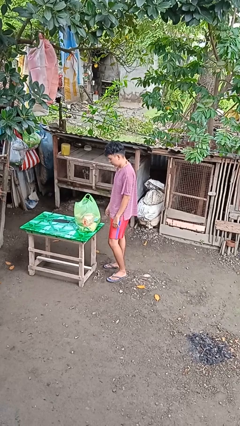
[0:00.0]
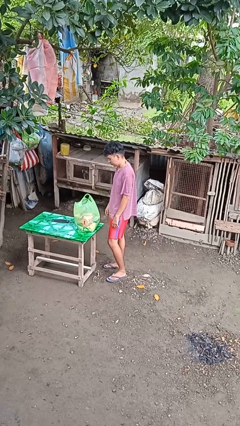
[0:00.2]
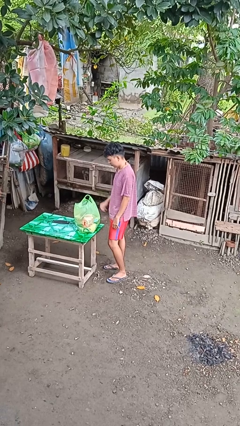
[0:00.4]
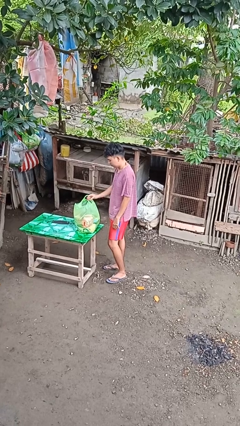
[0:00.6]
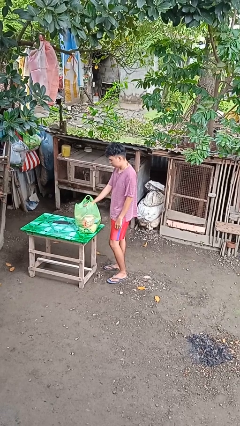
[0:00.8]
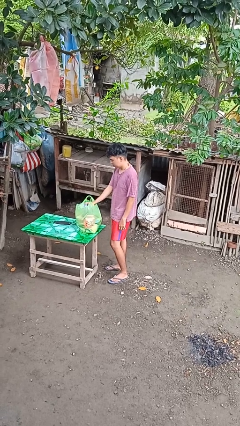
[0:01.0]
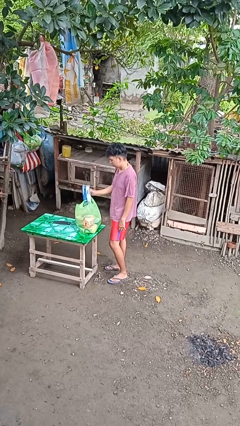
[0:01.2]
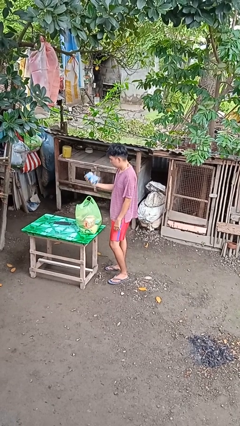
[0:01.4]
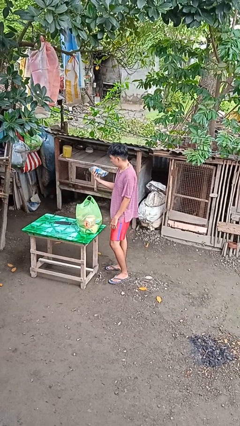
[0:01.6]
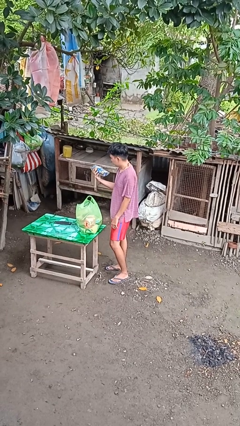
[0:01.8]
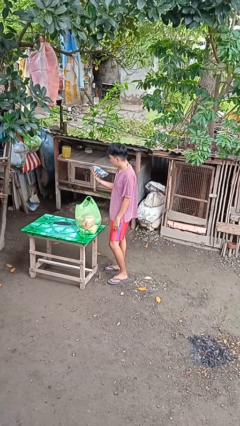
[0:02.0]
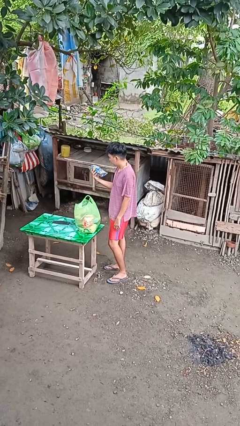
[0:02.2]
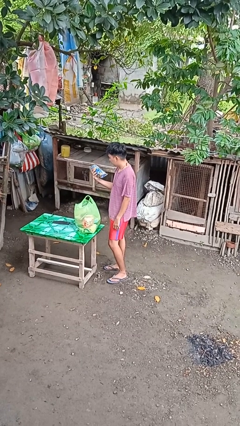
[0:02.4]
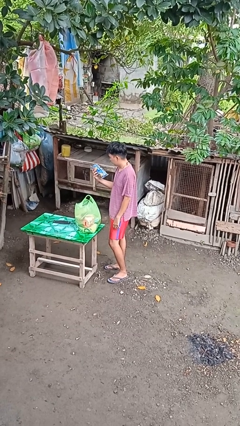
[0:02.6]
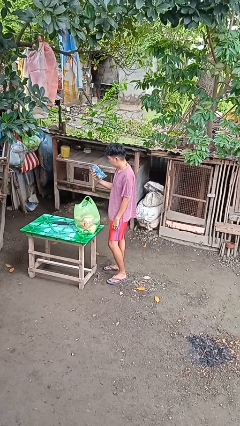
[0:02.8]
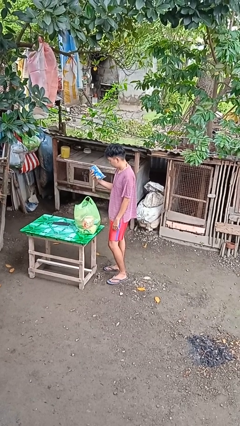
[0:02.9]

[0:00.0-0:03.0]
person takes object from bag

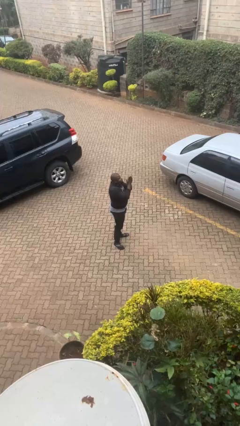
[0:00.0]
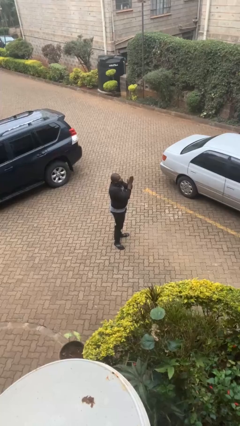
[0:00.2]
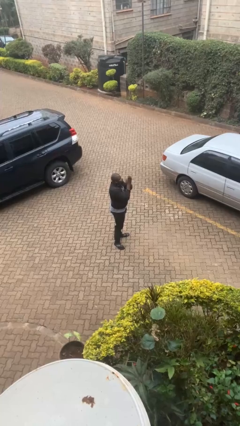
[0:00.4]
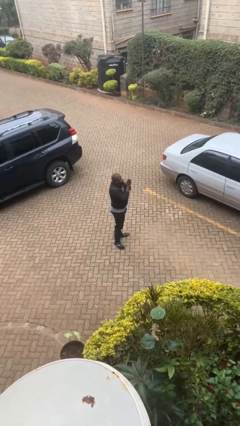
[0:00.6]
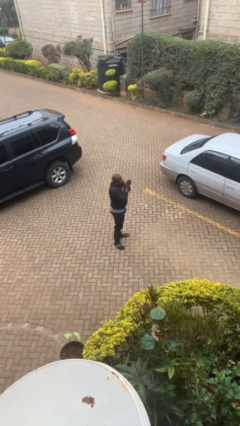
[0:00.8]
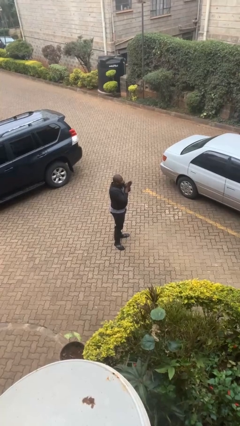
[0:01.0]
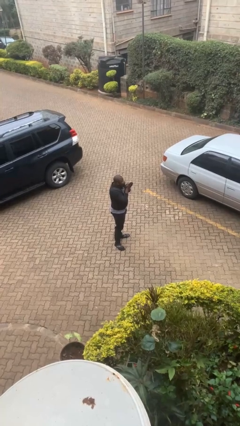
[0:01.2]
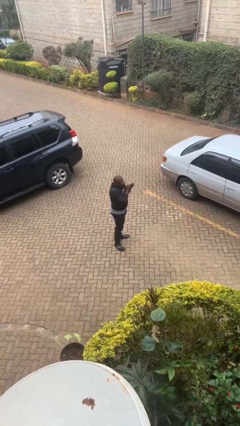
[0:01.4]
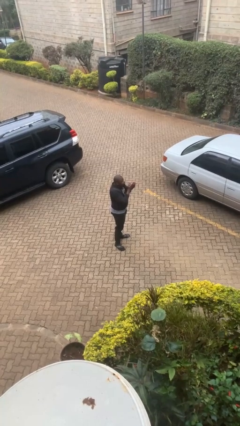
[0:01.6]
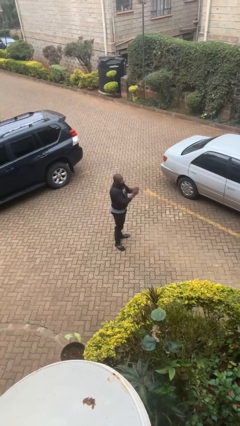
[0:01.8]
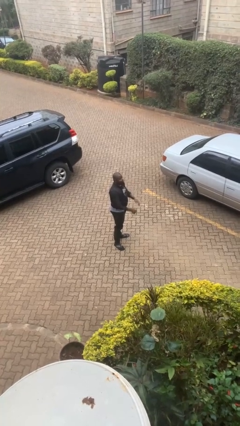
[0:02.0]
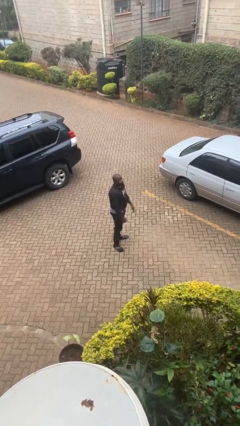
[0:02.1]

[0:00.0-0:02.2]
person blows into hands

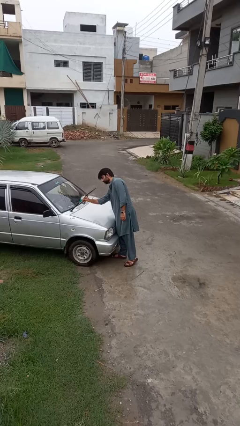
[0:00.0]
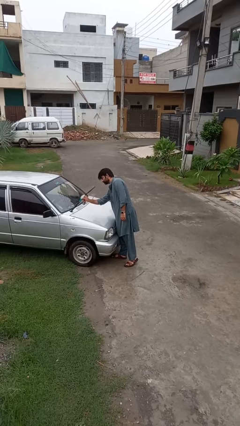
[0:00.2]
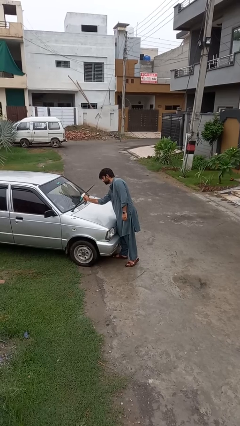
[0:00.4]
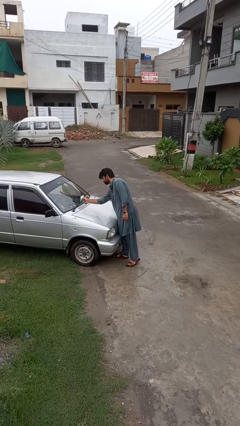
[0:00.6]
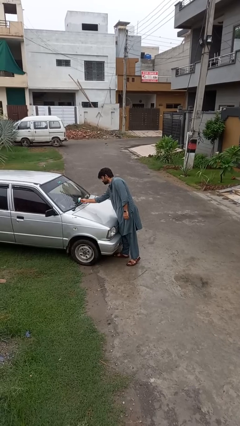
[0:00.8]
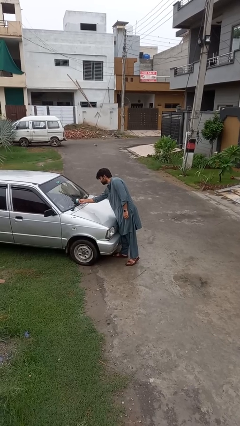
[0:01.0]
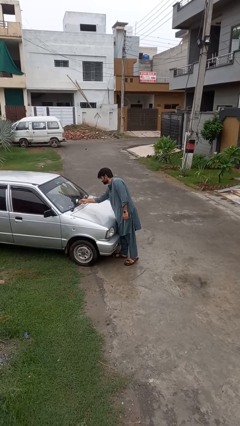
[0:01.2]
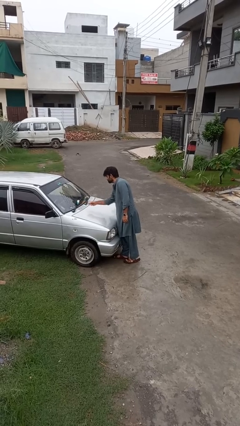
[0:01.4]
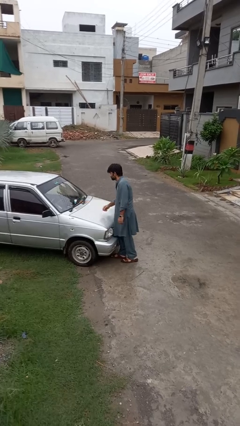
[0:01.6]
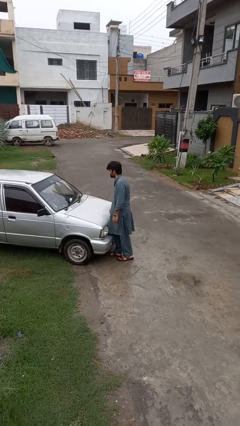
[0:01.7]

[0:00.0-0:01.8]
person flips down car wipers

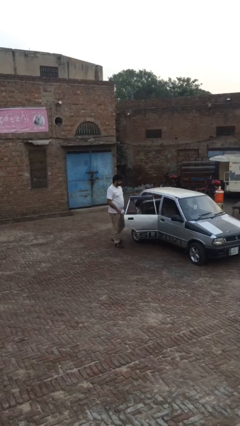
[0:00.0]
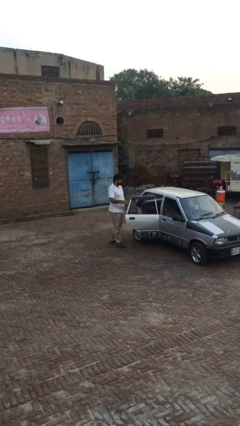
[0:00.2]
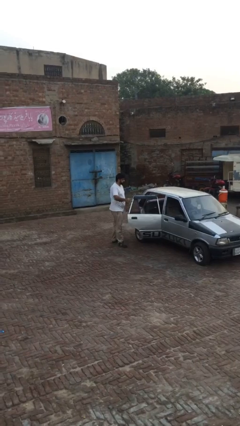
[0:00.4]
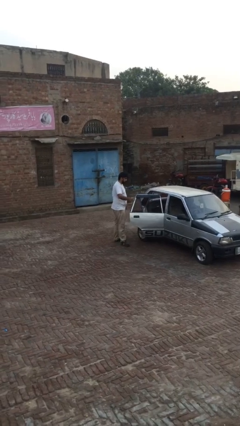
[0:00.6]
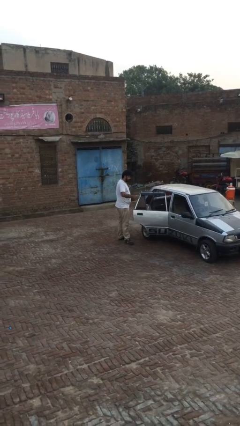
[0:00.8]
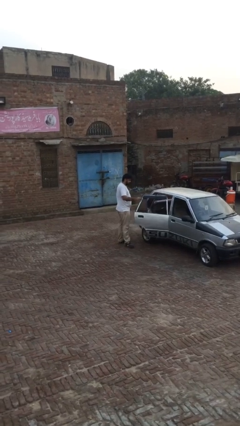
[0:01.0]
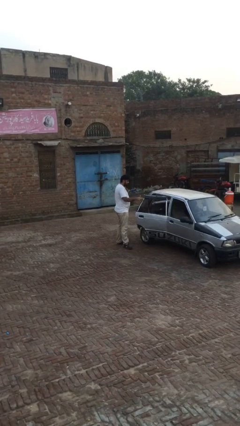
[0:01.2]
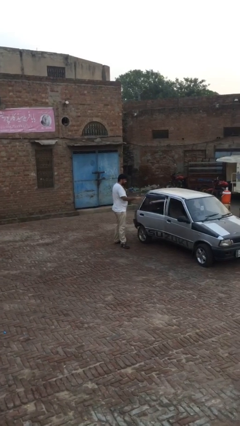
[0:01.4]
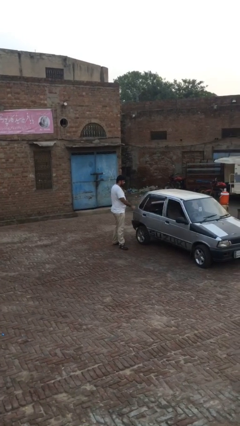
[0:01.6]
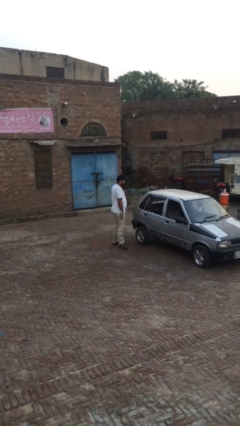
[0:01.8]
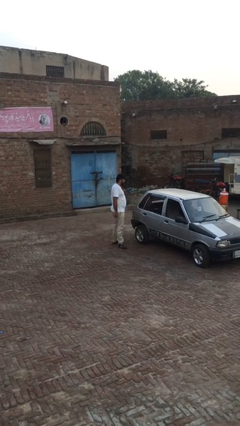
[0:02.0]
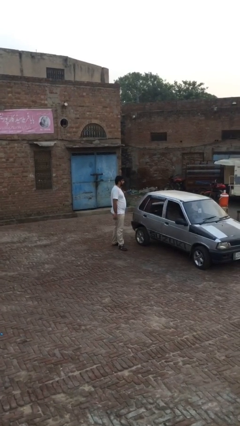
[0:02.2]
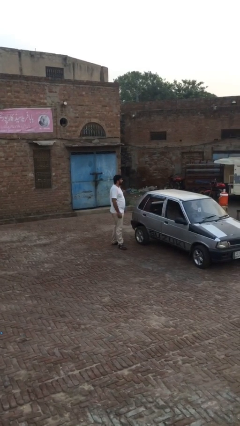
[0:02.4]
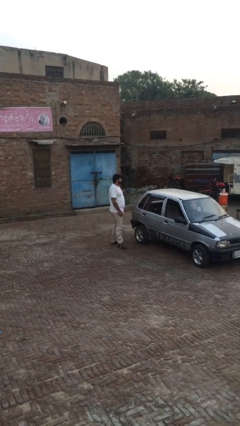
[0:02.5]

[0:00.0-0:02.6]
person closes car door

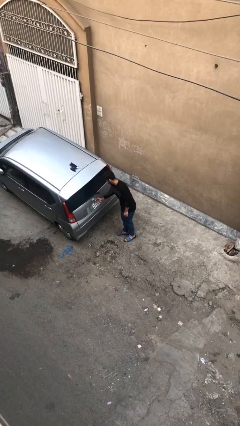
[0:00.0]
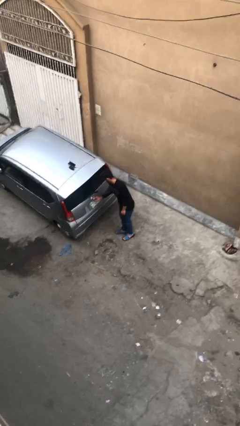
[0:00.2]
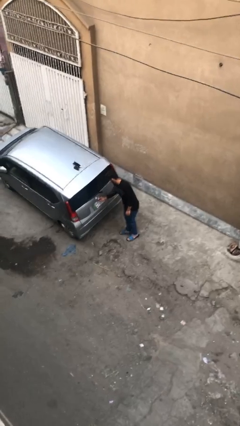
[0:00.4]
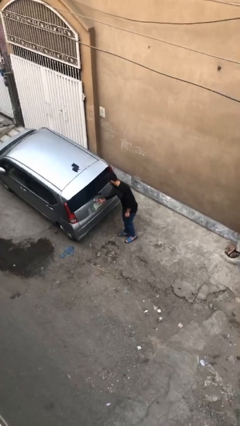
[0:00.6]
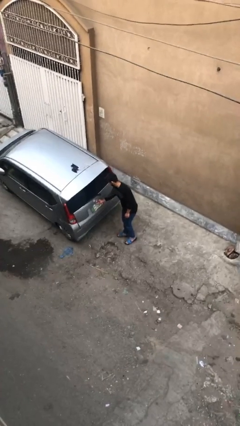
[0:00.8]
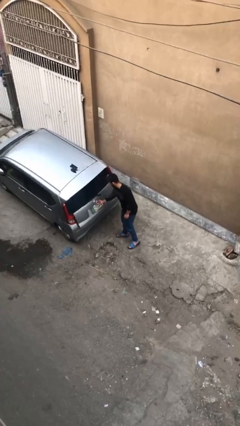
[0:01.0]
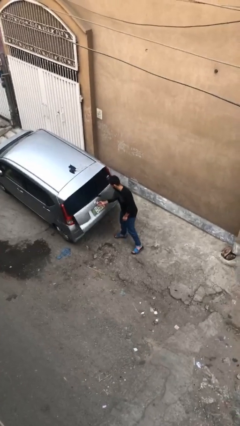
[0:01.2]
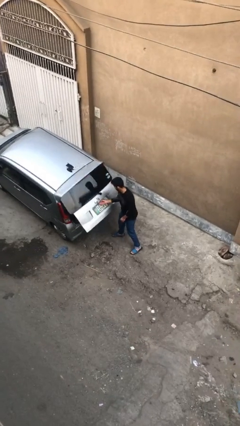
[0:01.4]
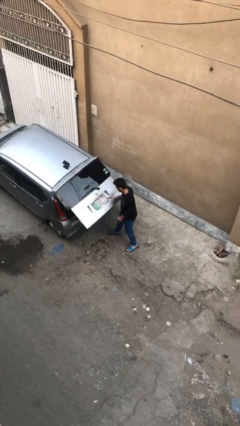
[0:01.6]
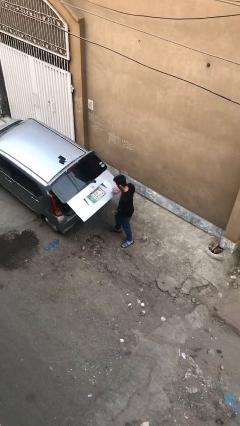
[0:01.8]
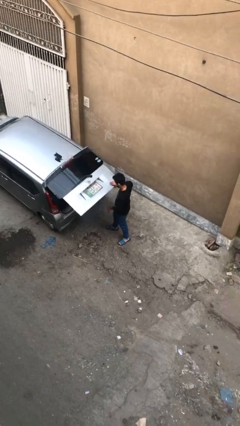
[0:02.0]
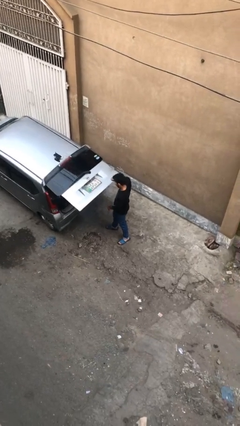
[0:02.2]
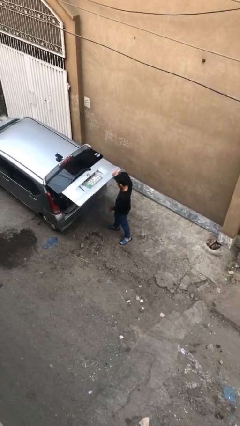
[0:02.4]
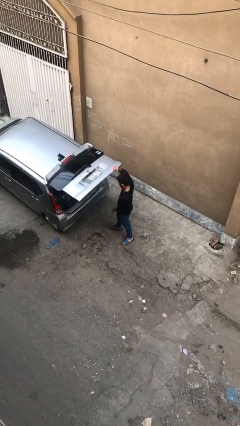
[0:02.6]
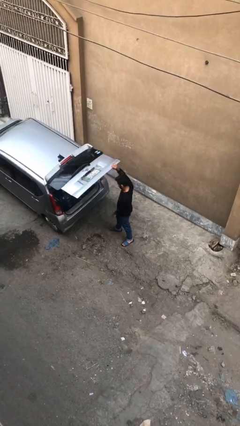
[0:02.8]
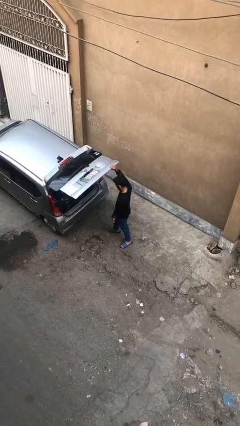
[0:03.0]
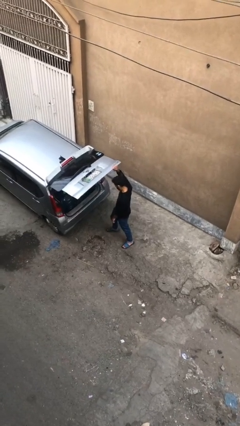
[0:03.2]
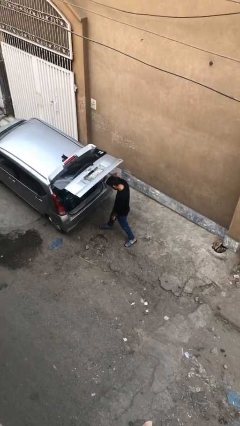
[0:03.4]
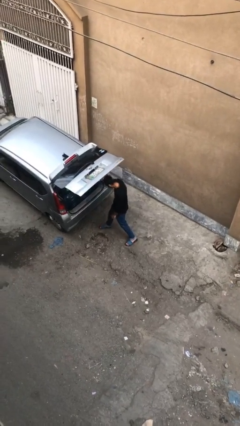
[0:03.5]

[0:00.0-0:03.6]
person opens car trunk

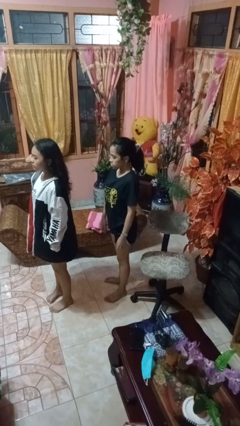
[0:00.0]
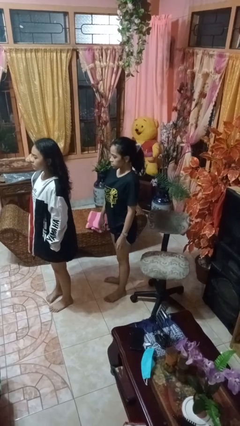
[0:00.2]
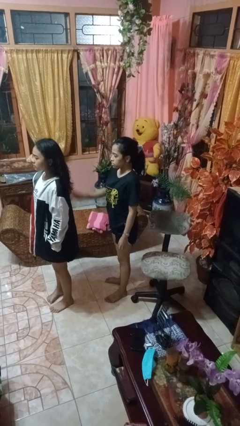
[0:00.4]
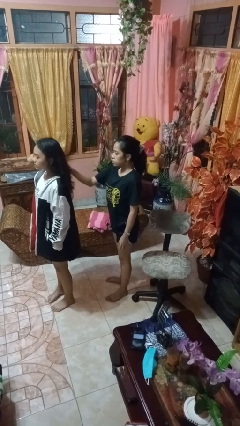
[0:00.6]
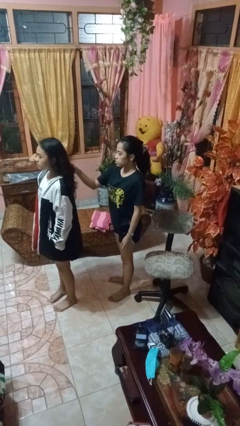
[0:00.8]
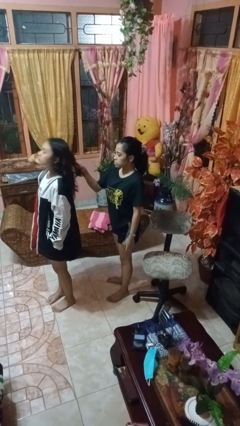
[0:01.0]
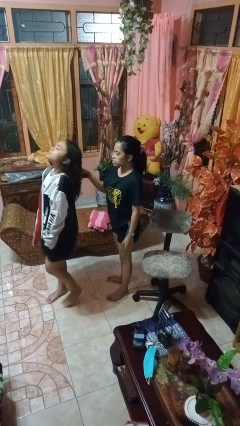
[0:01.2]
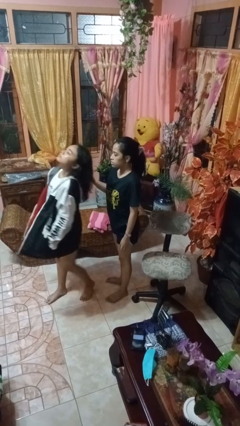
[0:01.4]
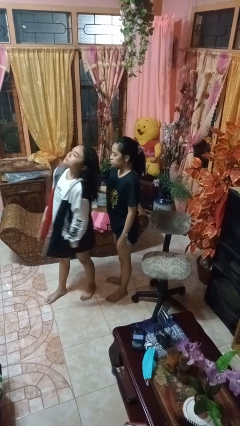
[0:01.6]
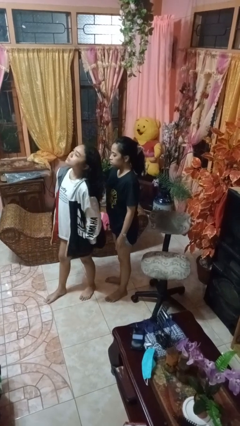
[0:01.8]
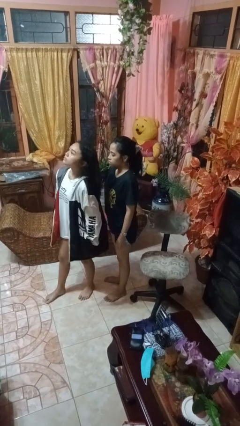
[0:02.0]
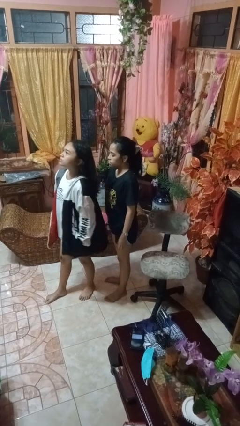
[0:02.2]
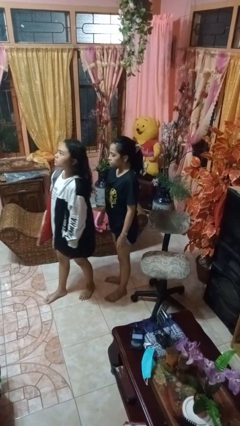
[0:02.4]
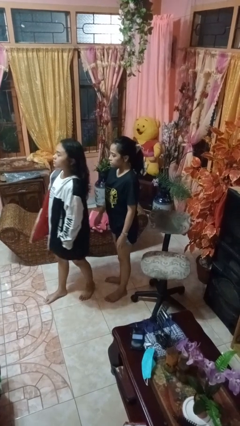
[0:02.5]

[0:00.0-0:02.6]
person grabs person by hair

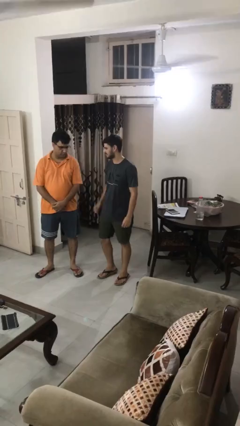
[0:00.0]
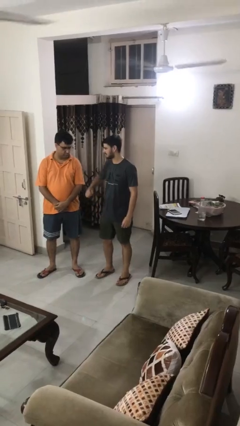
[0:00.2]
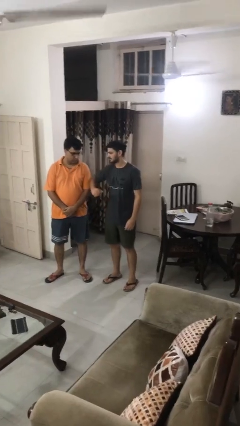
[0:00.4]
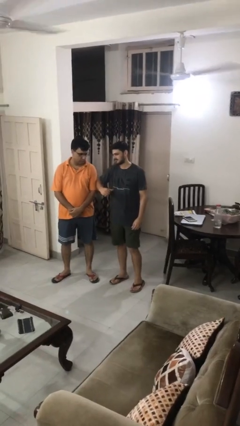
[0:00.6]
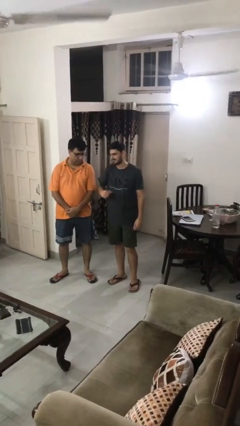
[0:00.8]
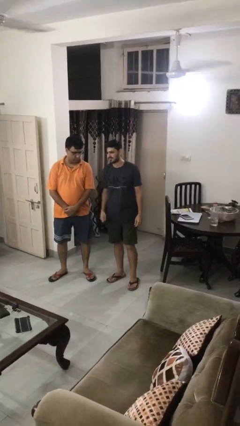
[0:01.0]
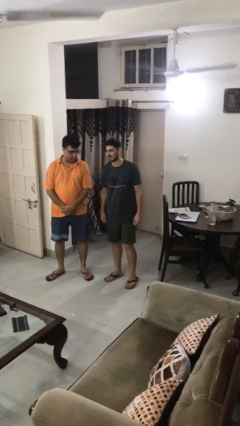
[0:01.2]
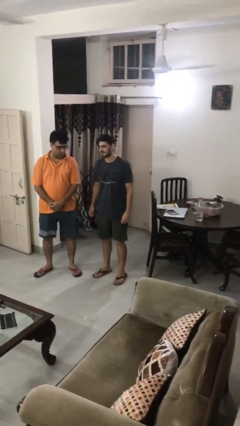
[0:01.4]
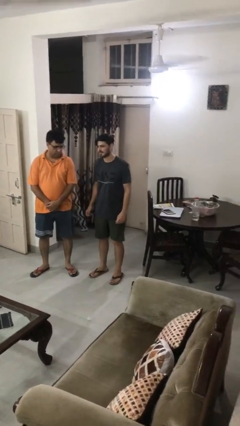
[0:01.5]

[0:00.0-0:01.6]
person nudges person with elbow
